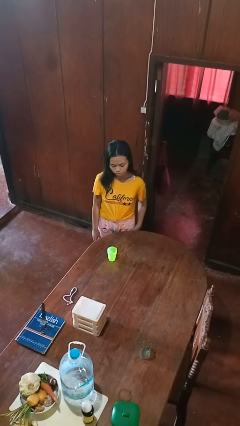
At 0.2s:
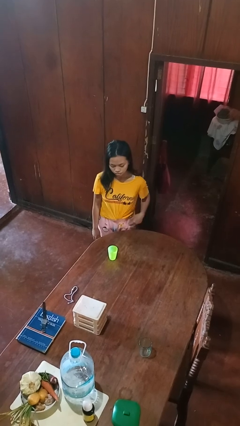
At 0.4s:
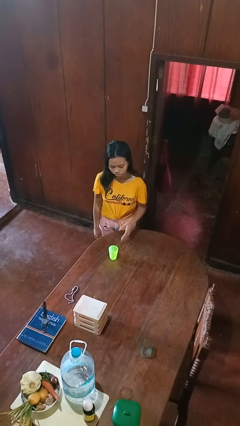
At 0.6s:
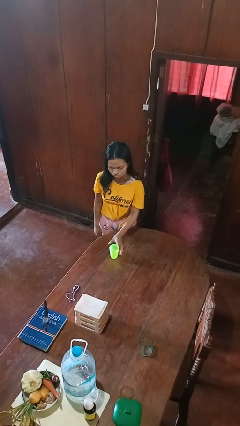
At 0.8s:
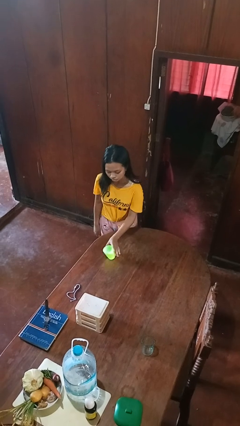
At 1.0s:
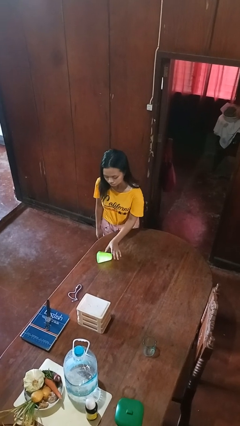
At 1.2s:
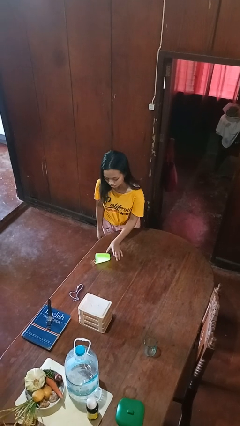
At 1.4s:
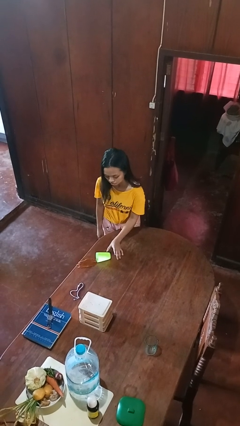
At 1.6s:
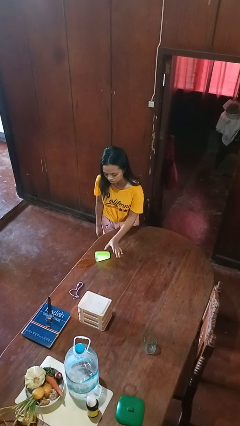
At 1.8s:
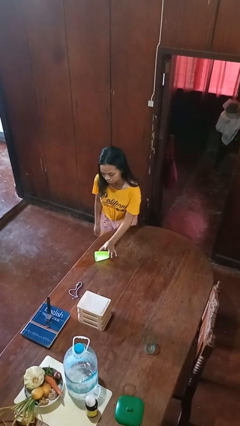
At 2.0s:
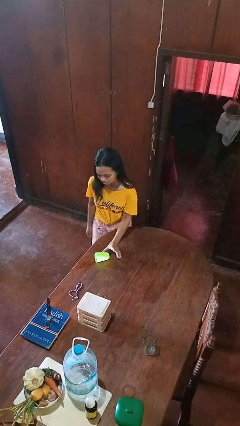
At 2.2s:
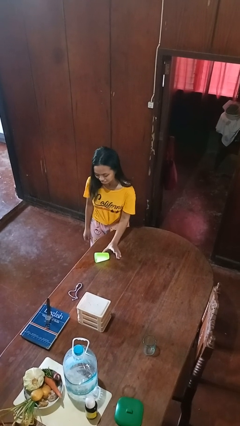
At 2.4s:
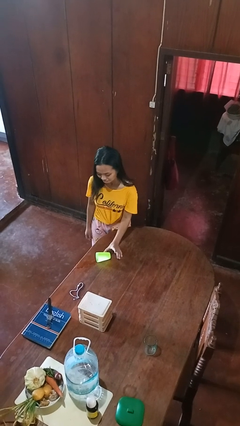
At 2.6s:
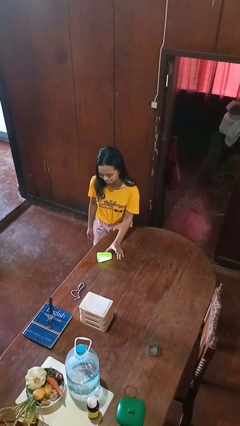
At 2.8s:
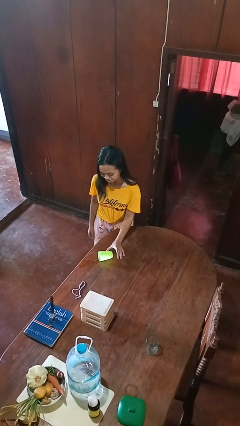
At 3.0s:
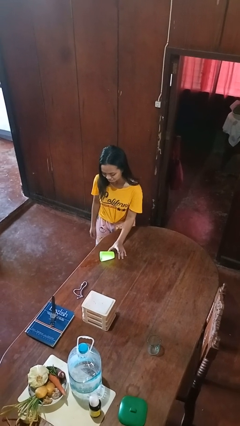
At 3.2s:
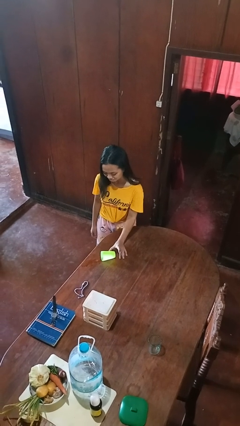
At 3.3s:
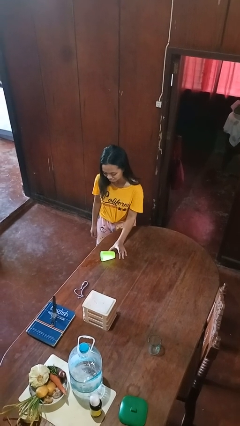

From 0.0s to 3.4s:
person spills on floor

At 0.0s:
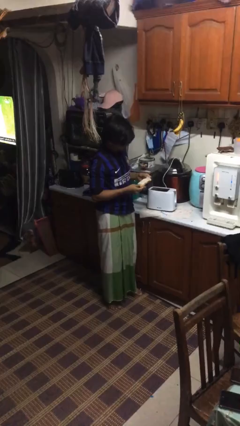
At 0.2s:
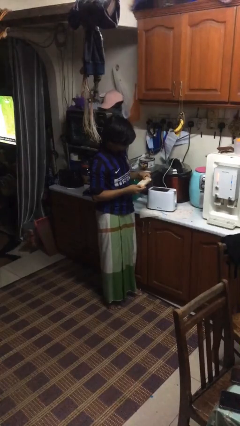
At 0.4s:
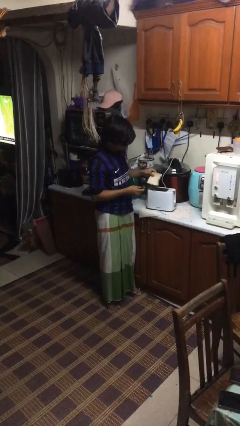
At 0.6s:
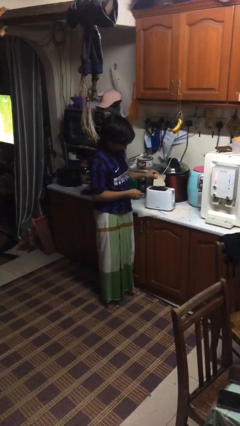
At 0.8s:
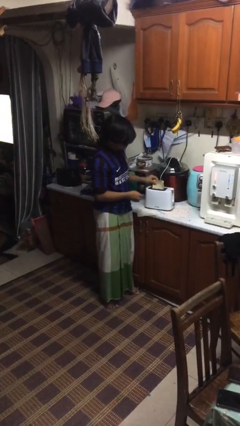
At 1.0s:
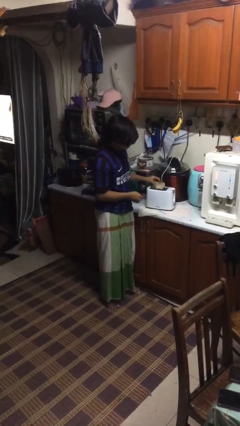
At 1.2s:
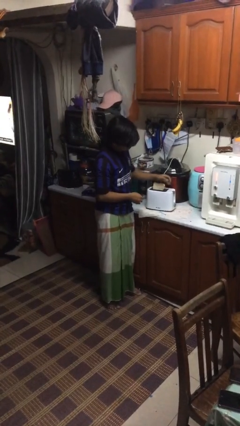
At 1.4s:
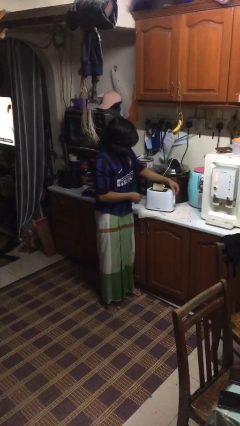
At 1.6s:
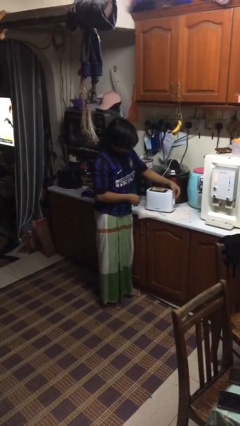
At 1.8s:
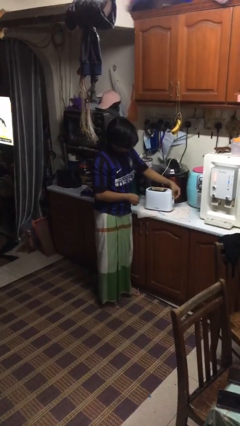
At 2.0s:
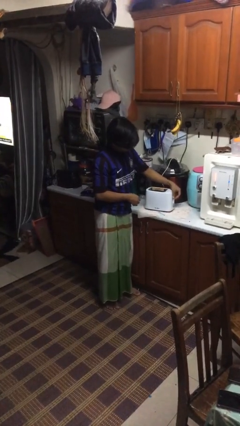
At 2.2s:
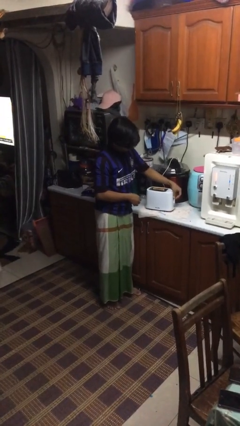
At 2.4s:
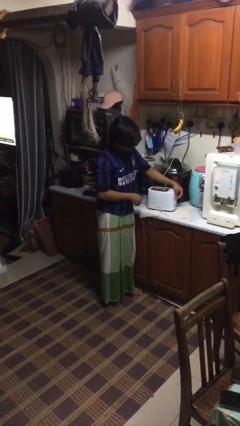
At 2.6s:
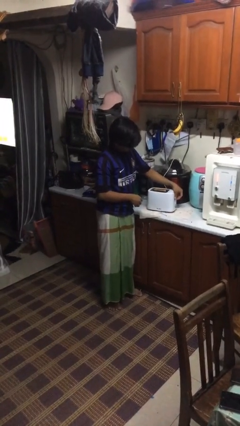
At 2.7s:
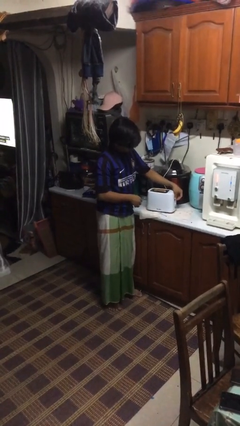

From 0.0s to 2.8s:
person puts object into toaster

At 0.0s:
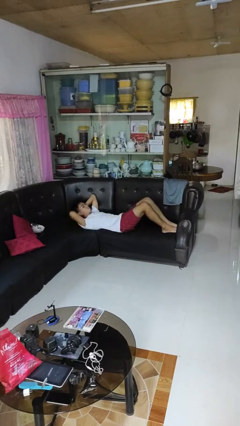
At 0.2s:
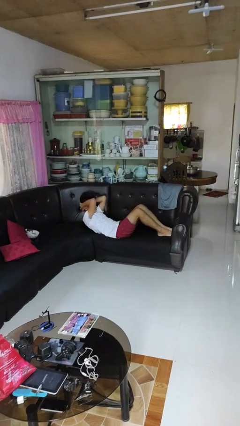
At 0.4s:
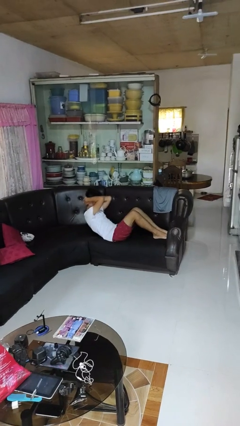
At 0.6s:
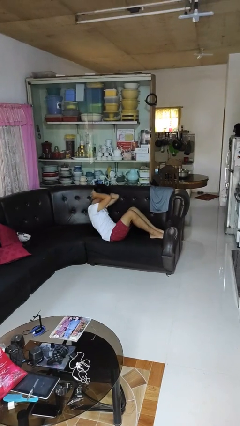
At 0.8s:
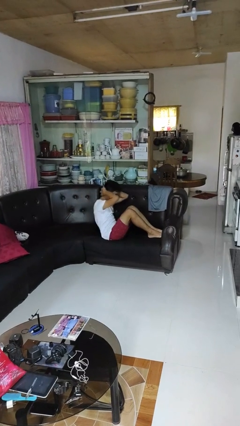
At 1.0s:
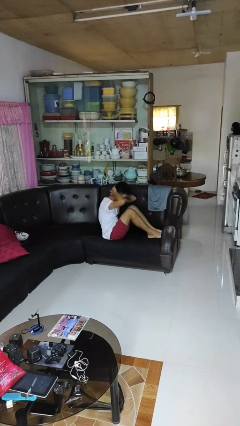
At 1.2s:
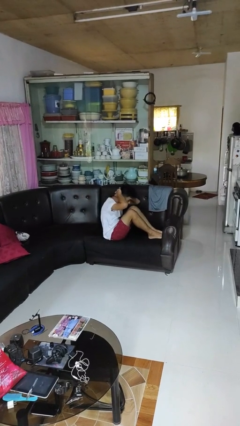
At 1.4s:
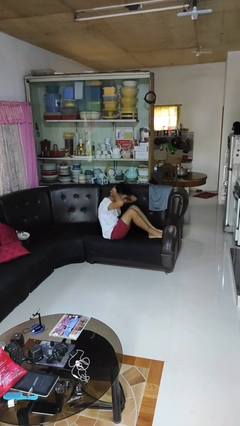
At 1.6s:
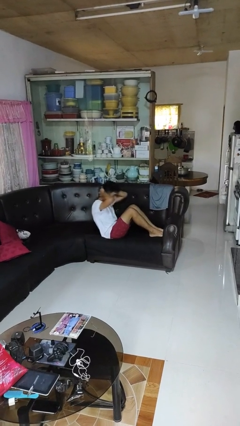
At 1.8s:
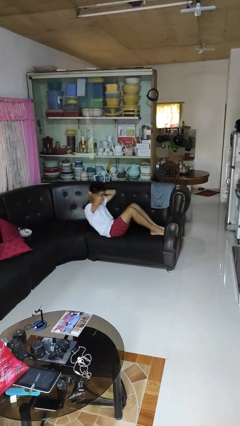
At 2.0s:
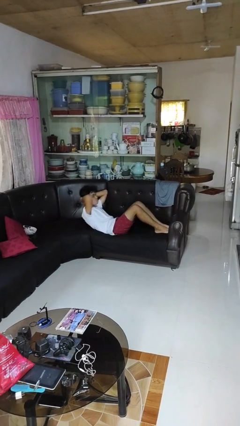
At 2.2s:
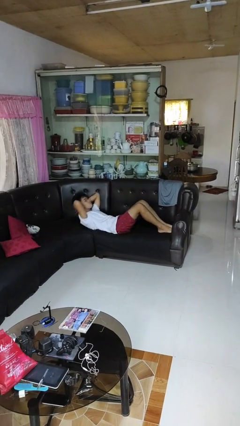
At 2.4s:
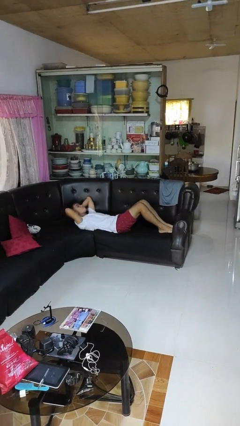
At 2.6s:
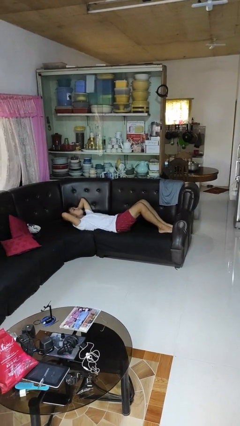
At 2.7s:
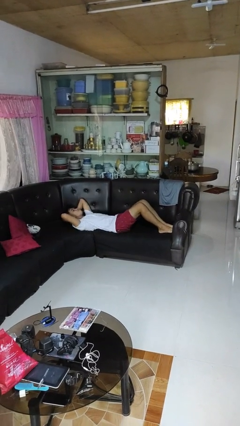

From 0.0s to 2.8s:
person exercises with situp

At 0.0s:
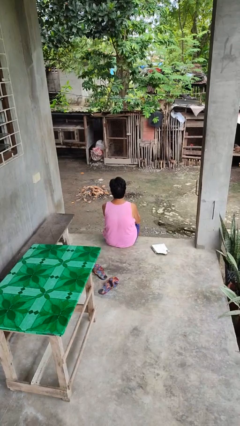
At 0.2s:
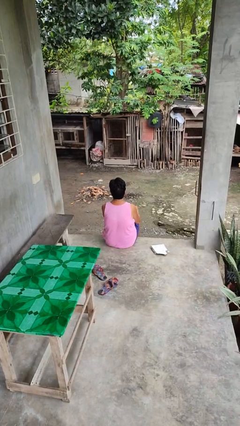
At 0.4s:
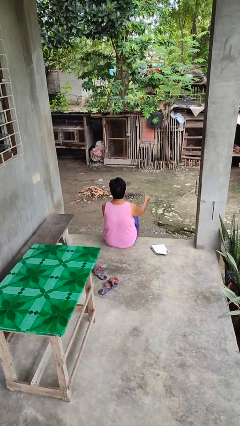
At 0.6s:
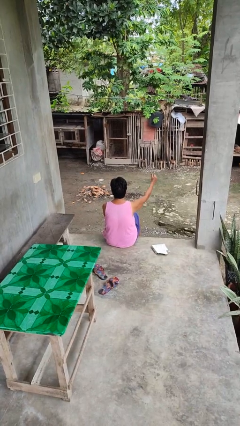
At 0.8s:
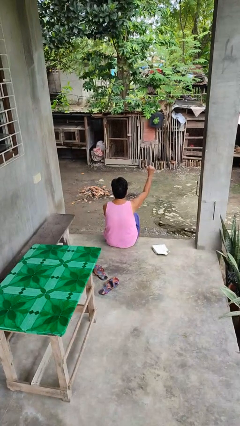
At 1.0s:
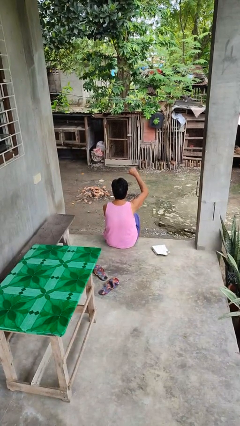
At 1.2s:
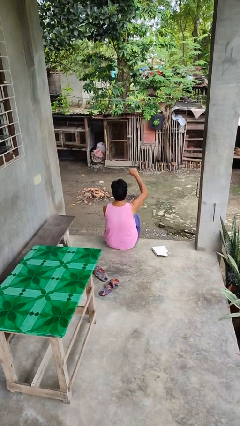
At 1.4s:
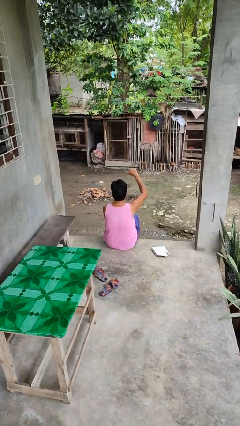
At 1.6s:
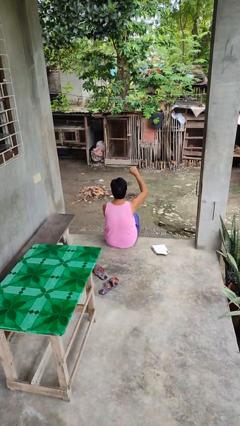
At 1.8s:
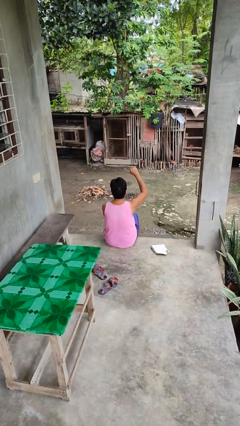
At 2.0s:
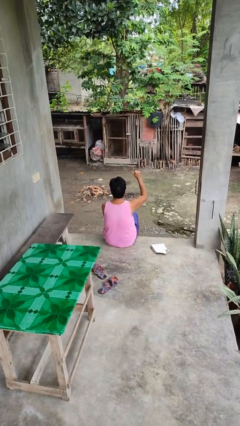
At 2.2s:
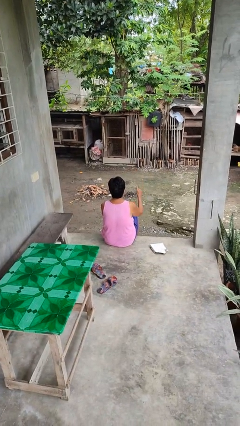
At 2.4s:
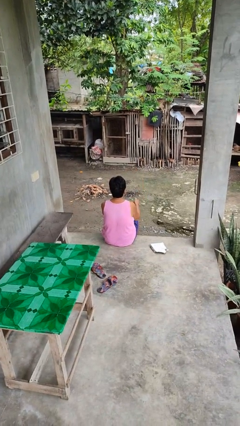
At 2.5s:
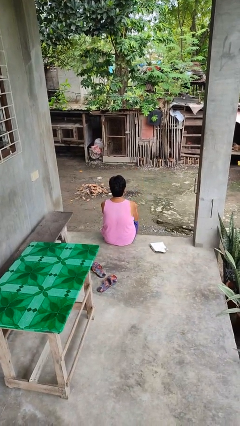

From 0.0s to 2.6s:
person gestures thumbs down

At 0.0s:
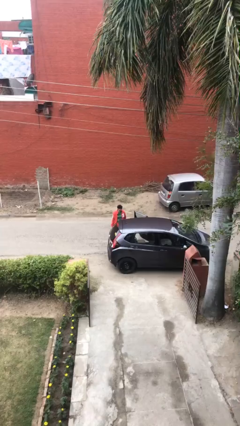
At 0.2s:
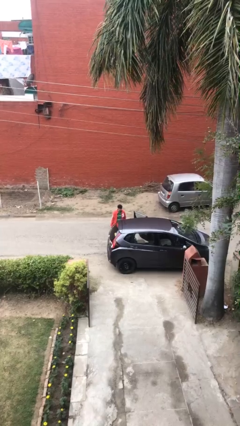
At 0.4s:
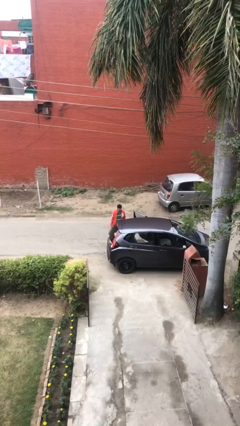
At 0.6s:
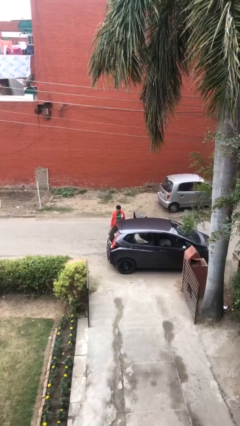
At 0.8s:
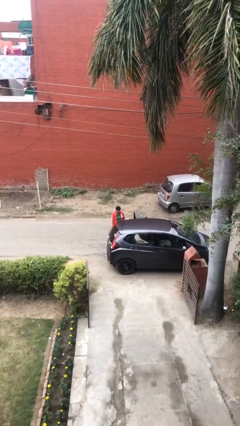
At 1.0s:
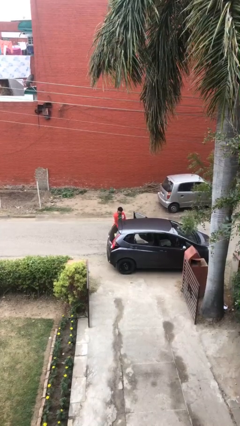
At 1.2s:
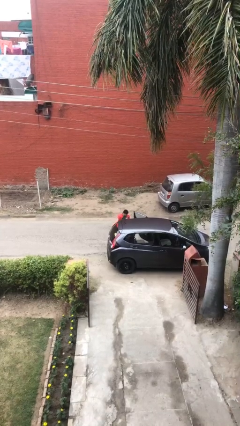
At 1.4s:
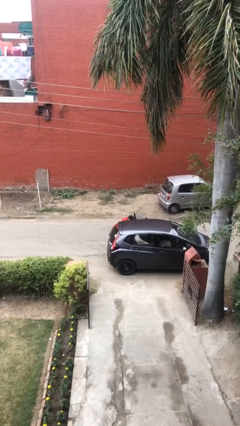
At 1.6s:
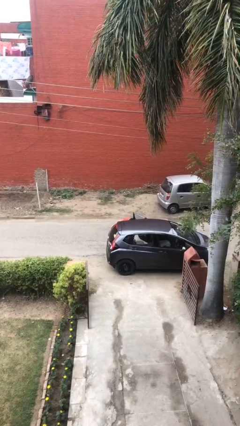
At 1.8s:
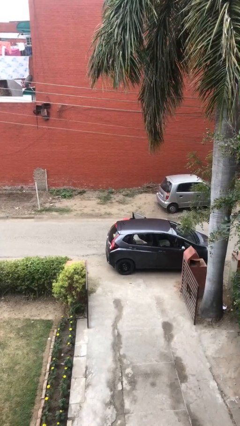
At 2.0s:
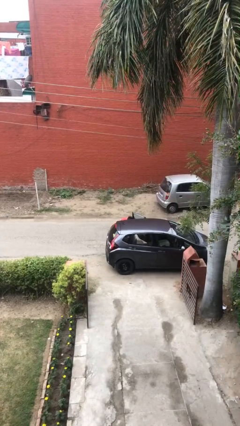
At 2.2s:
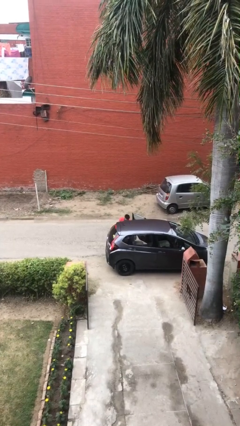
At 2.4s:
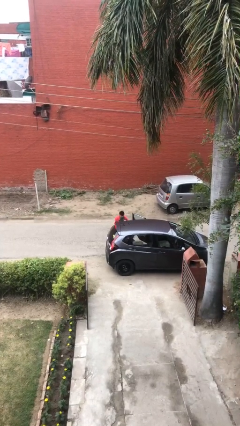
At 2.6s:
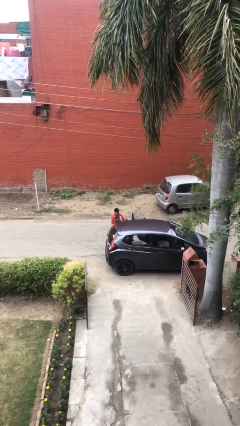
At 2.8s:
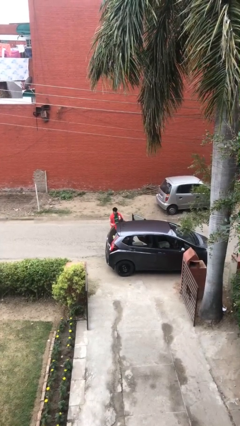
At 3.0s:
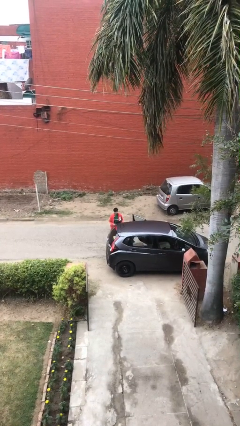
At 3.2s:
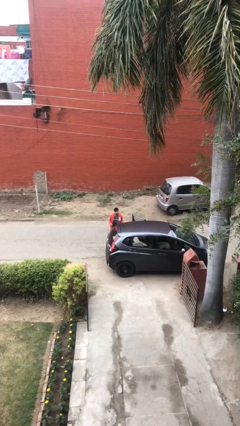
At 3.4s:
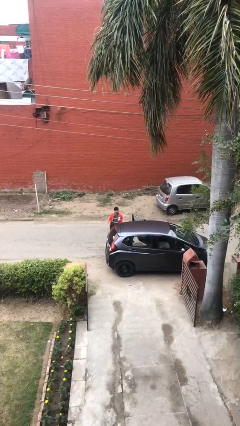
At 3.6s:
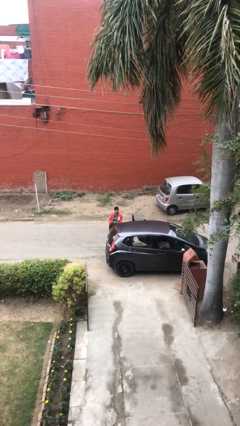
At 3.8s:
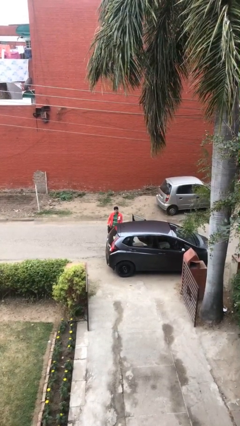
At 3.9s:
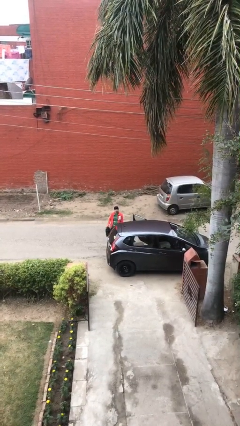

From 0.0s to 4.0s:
person unloads car

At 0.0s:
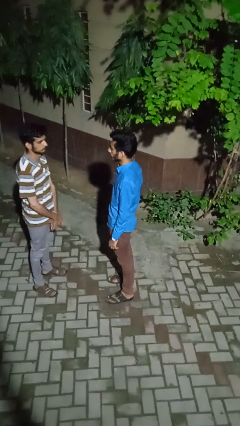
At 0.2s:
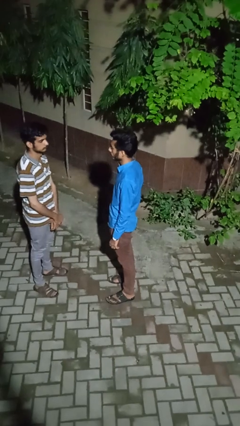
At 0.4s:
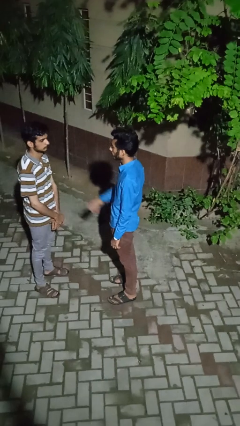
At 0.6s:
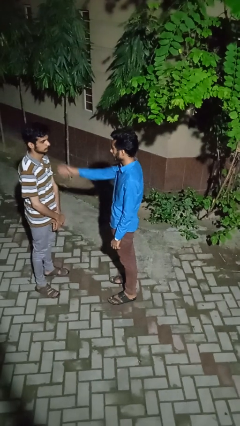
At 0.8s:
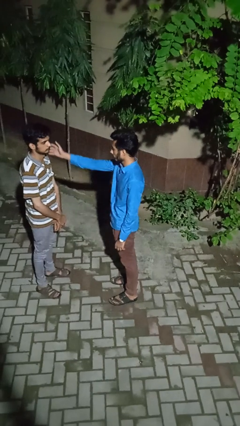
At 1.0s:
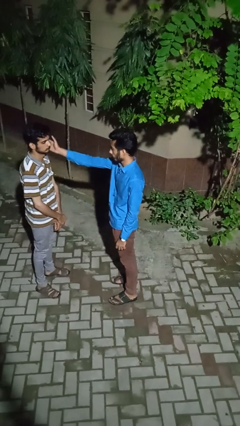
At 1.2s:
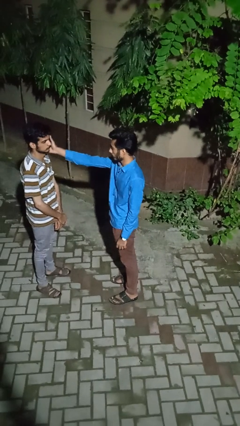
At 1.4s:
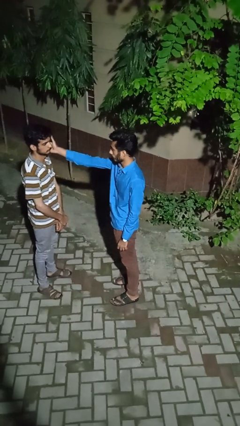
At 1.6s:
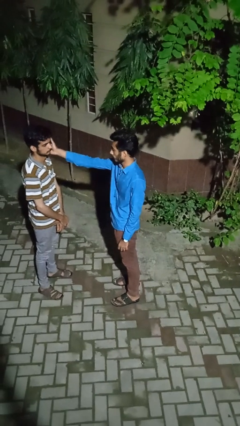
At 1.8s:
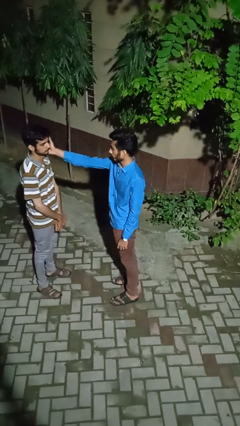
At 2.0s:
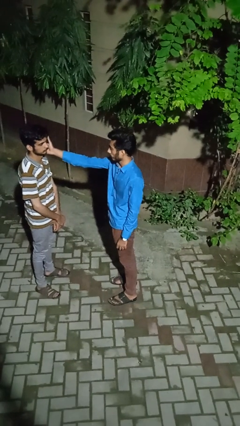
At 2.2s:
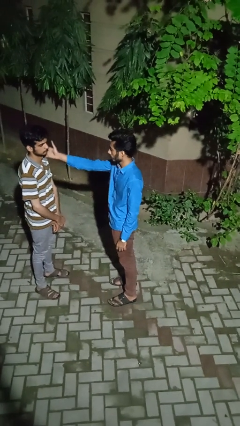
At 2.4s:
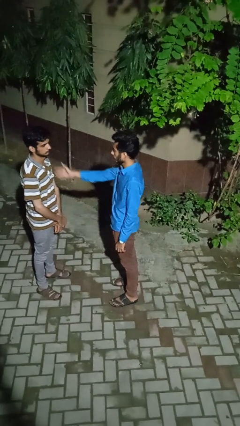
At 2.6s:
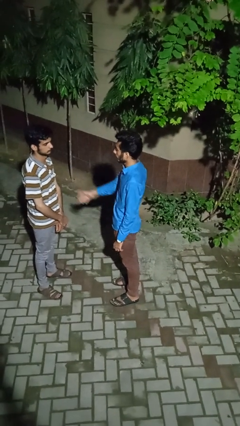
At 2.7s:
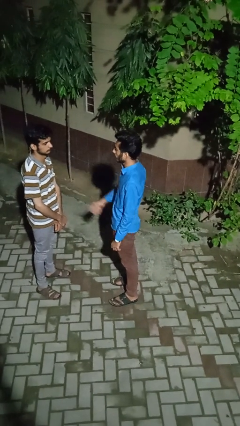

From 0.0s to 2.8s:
person touches face of person
